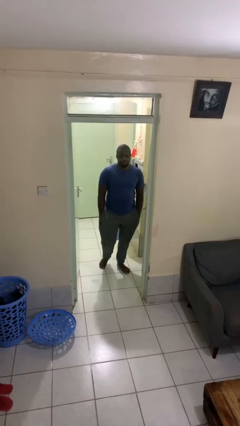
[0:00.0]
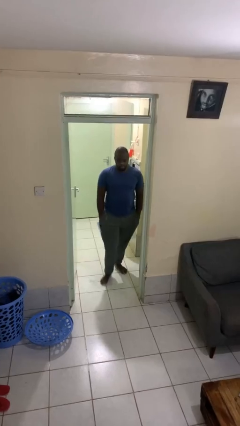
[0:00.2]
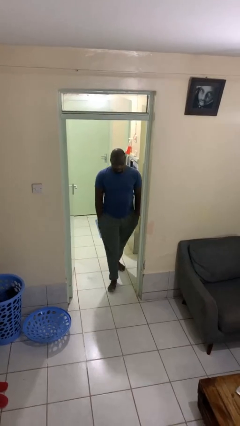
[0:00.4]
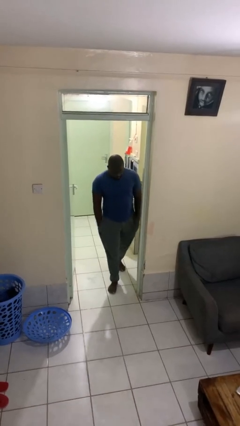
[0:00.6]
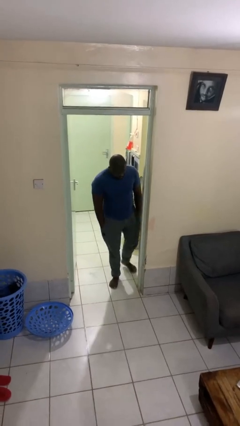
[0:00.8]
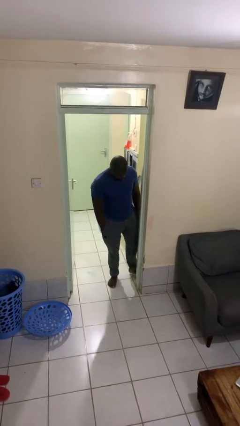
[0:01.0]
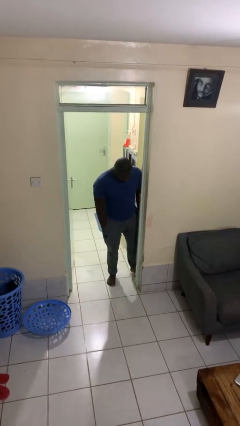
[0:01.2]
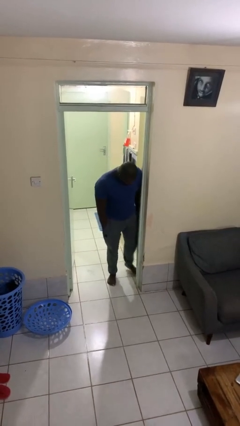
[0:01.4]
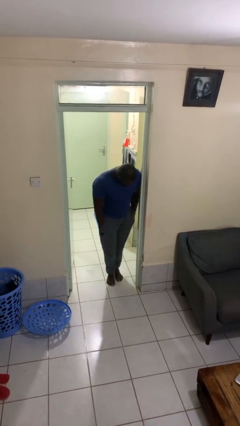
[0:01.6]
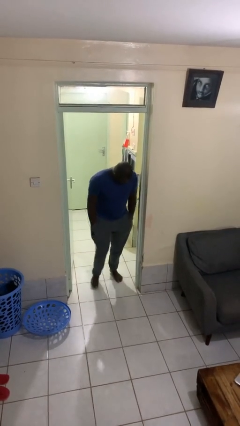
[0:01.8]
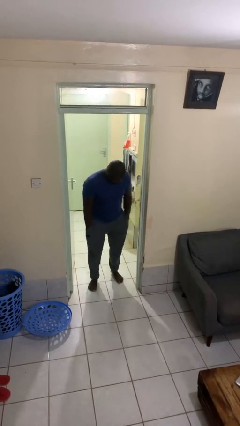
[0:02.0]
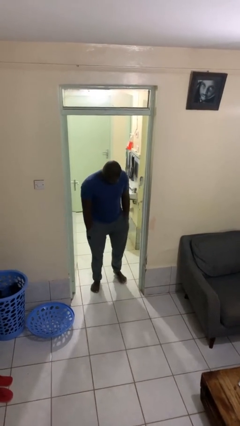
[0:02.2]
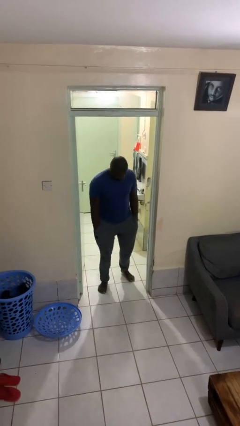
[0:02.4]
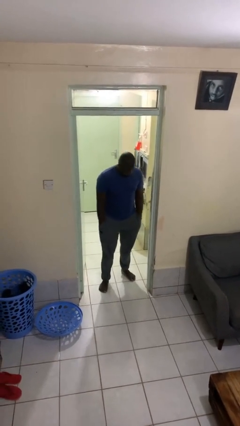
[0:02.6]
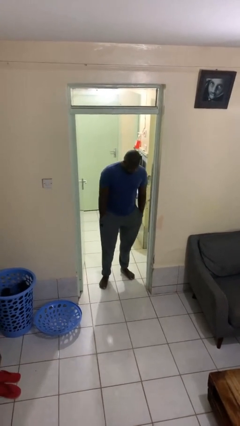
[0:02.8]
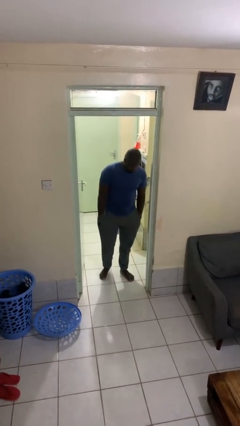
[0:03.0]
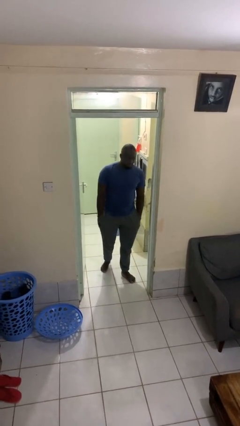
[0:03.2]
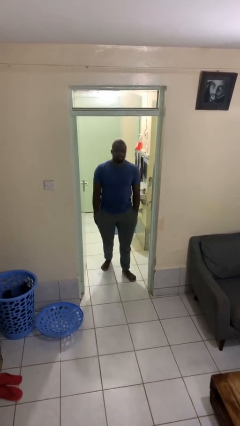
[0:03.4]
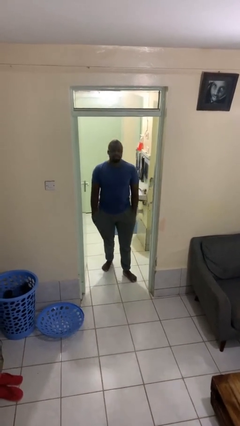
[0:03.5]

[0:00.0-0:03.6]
person bumps into wall

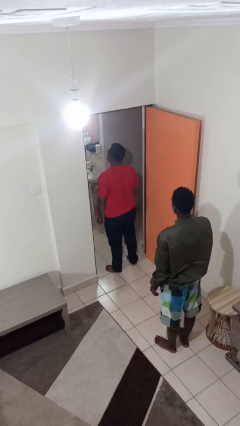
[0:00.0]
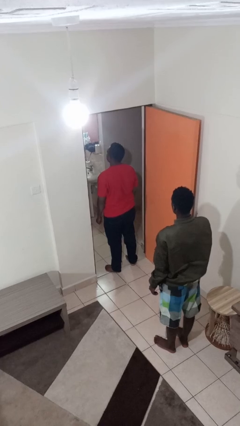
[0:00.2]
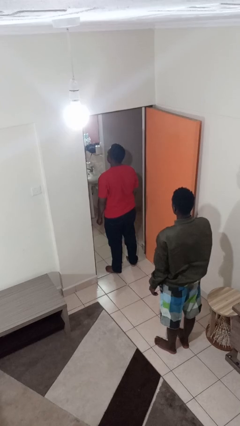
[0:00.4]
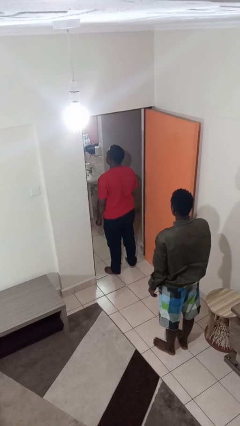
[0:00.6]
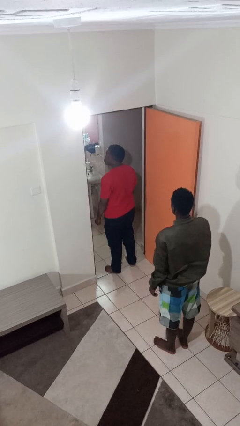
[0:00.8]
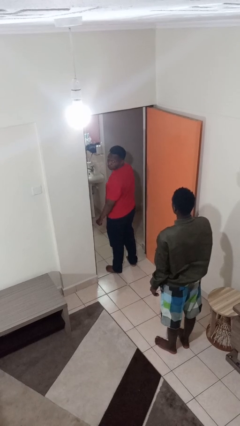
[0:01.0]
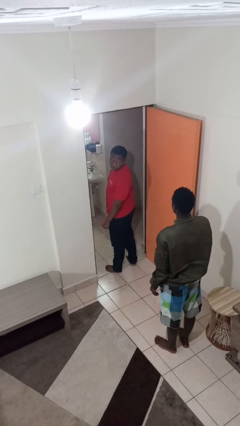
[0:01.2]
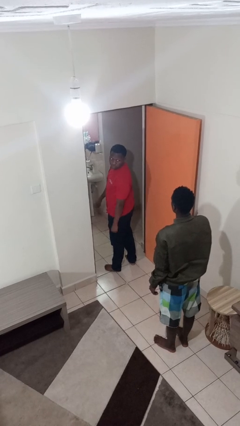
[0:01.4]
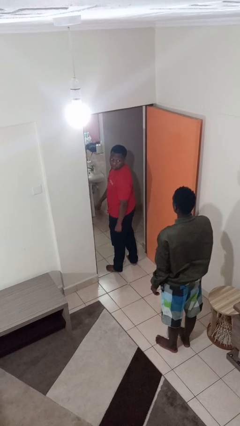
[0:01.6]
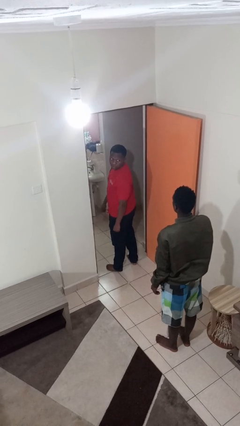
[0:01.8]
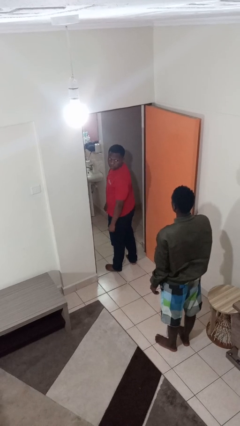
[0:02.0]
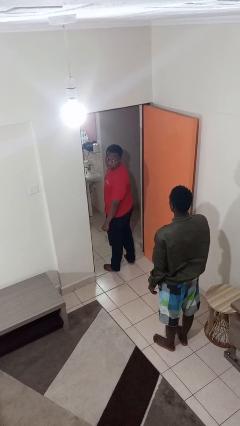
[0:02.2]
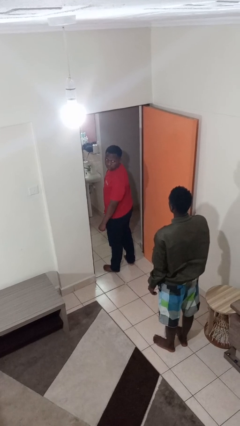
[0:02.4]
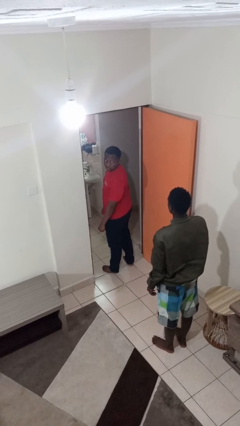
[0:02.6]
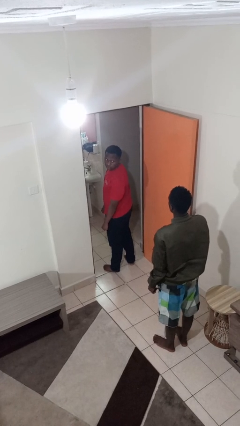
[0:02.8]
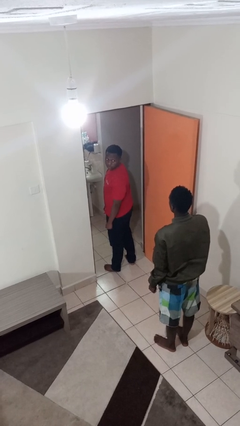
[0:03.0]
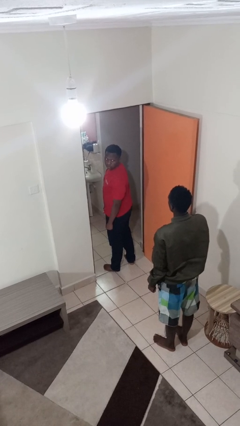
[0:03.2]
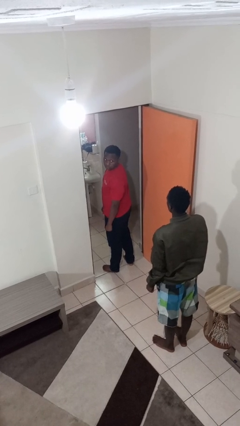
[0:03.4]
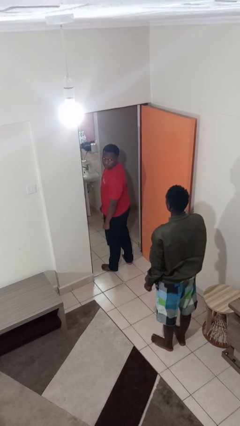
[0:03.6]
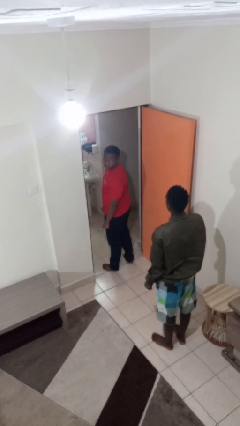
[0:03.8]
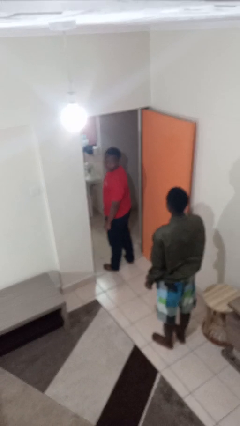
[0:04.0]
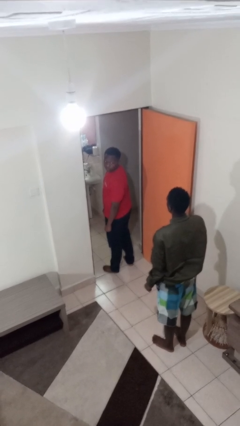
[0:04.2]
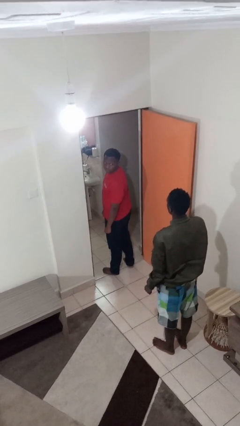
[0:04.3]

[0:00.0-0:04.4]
person looks over shoulder

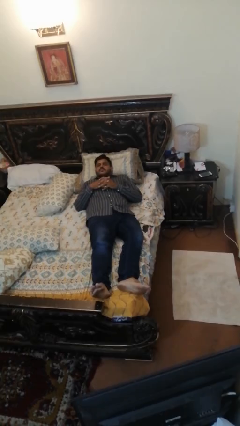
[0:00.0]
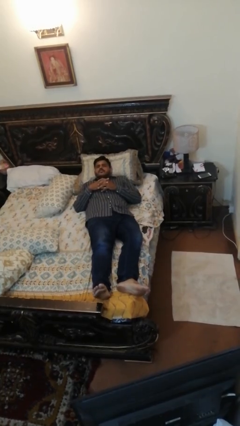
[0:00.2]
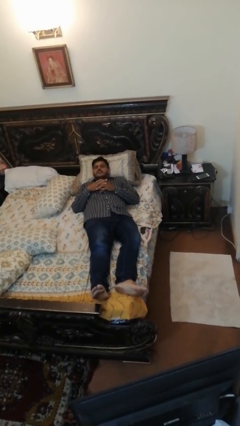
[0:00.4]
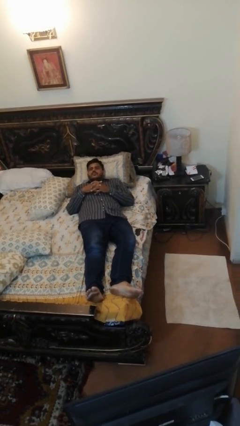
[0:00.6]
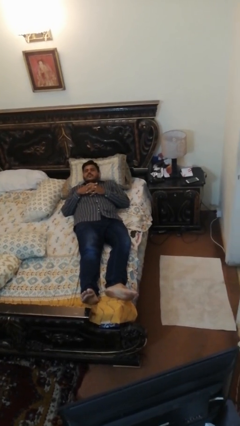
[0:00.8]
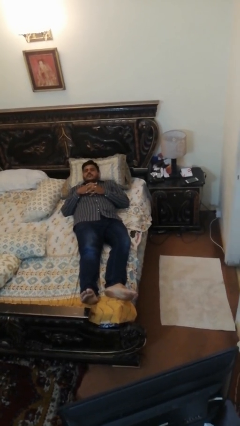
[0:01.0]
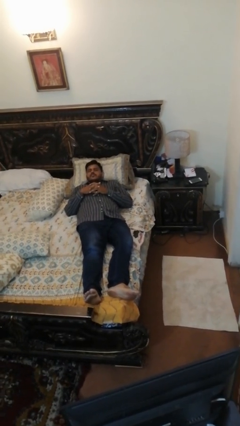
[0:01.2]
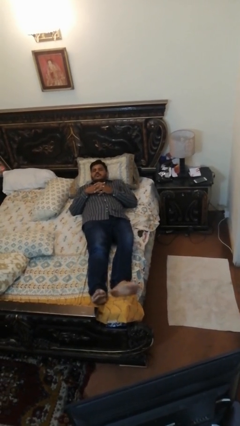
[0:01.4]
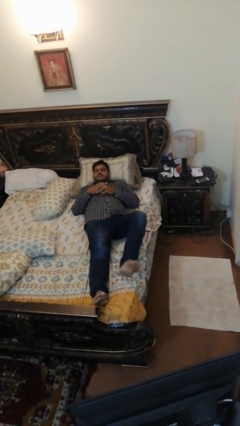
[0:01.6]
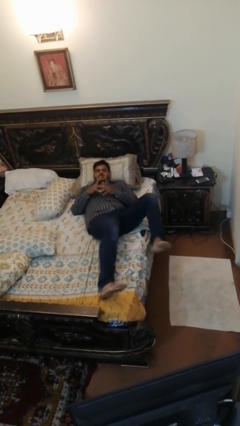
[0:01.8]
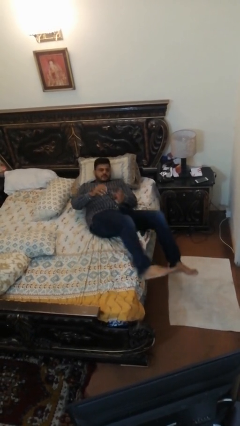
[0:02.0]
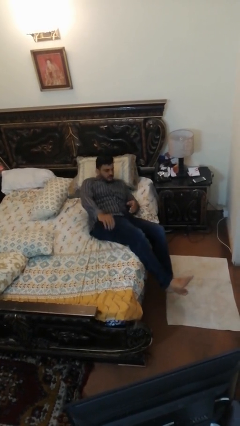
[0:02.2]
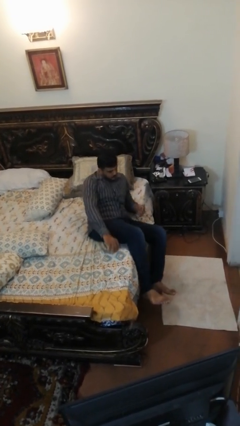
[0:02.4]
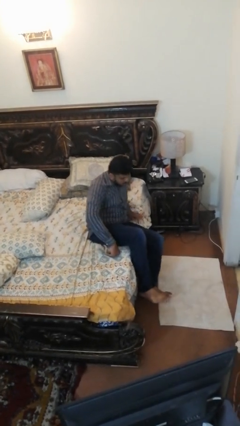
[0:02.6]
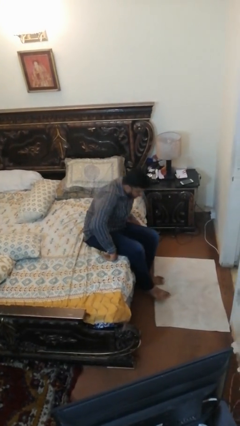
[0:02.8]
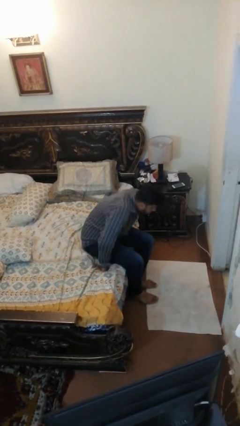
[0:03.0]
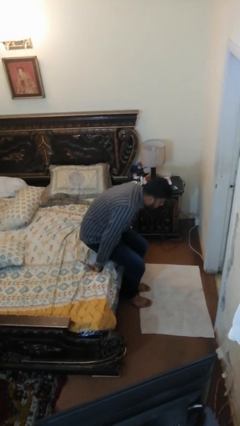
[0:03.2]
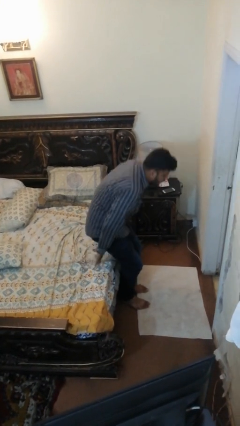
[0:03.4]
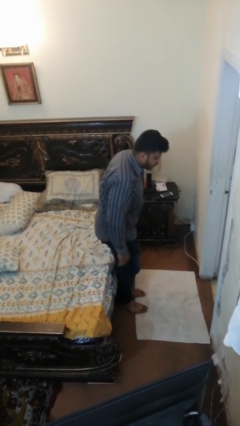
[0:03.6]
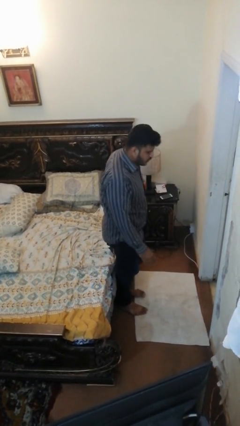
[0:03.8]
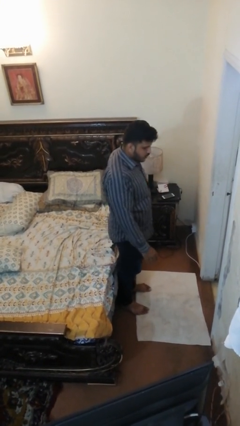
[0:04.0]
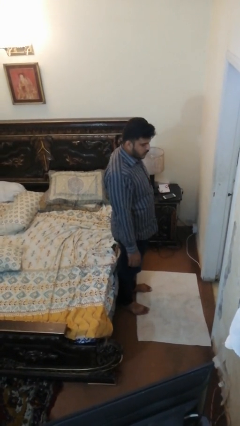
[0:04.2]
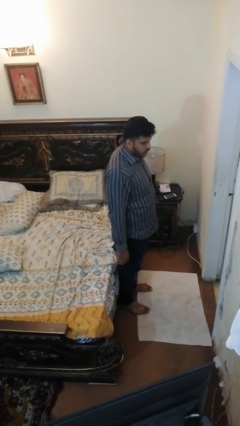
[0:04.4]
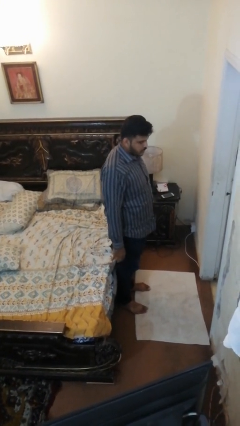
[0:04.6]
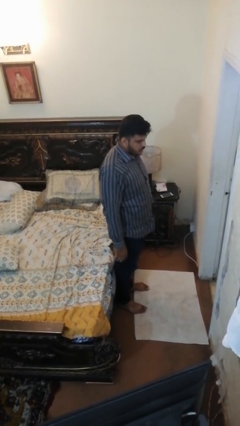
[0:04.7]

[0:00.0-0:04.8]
person stands up

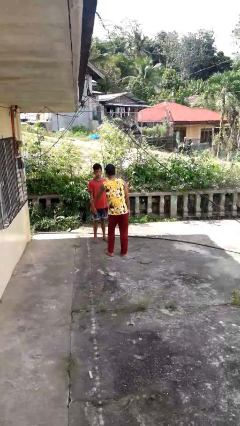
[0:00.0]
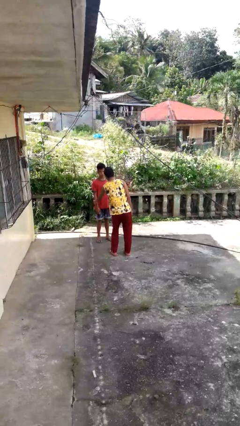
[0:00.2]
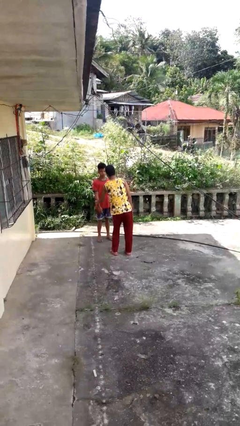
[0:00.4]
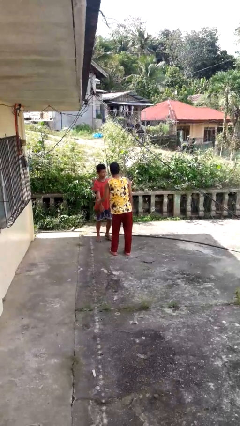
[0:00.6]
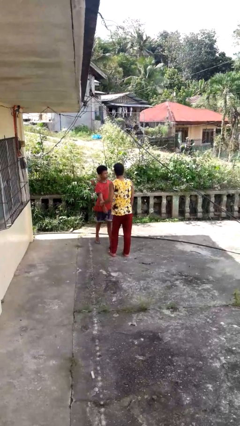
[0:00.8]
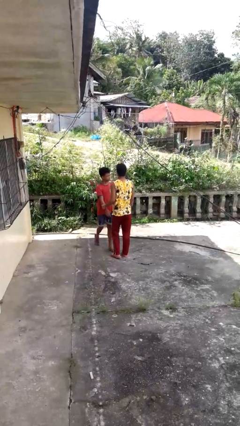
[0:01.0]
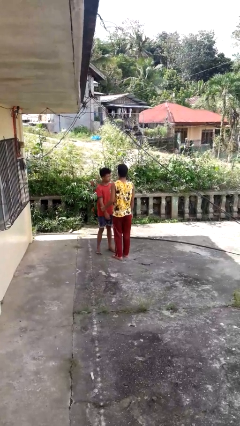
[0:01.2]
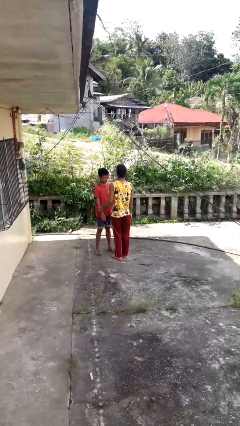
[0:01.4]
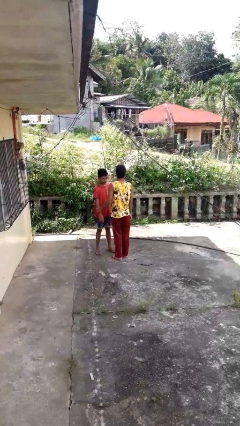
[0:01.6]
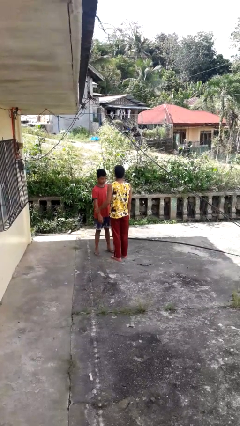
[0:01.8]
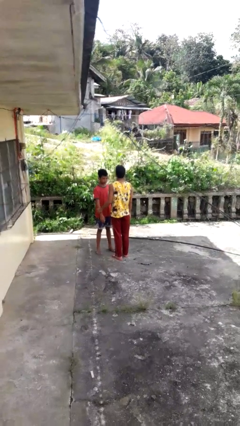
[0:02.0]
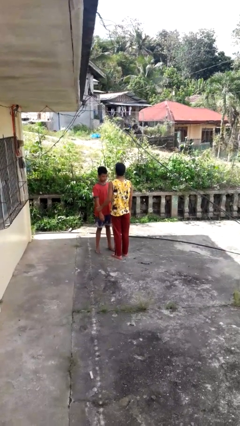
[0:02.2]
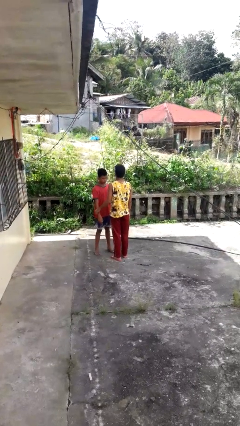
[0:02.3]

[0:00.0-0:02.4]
person grabs person by forearm

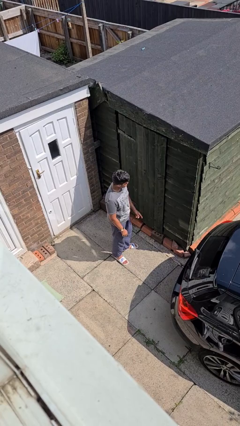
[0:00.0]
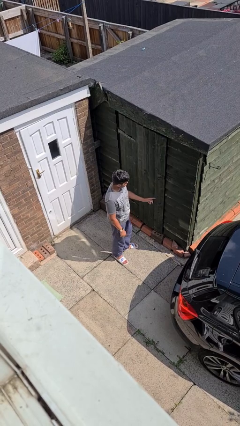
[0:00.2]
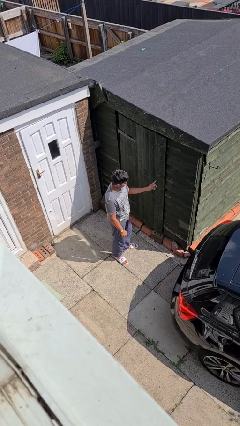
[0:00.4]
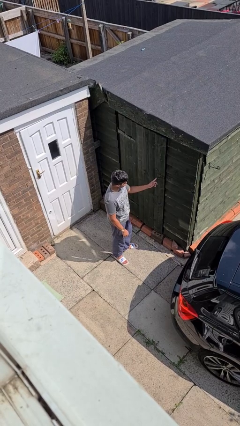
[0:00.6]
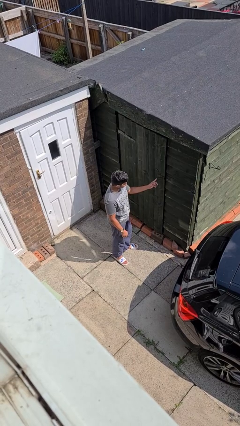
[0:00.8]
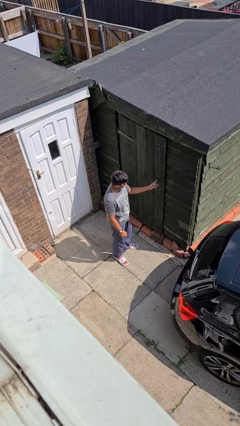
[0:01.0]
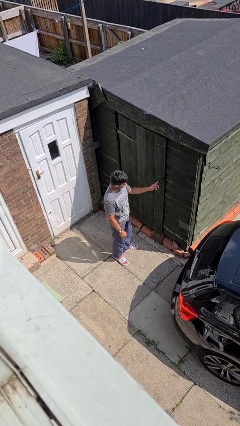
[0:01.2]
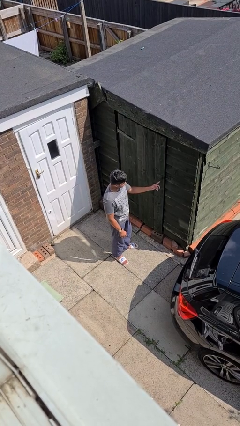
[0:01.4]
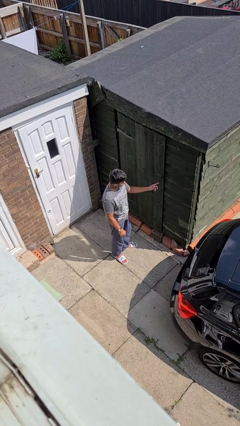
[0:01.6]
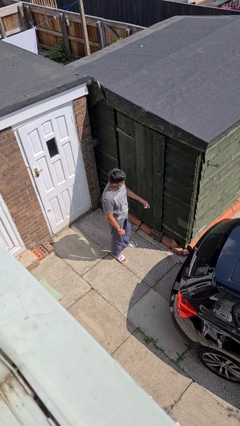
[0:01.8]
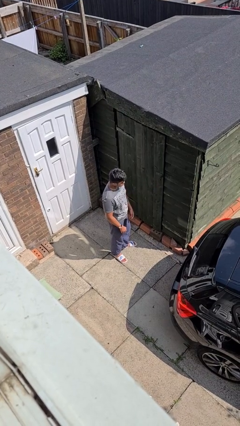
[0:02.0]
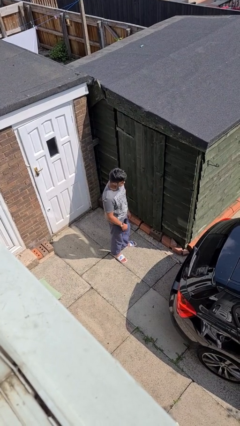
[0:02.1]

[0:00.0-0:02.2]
person taps object with finger

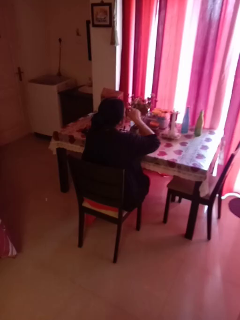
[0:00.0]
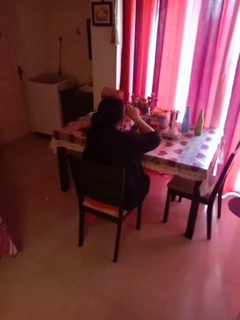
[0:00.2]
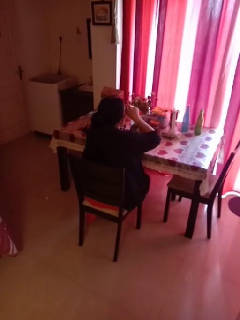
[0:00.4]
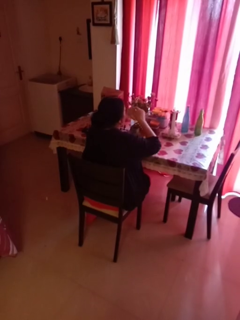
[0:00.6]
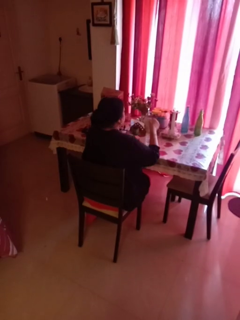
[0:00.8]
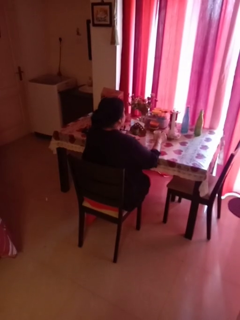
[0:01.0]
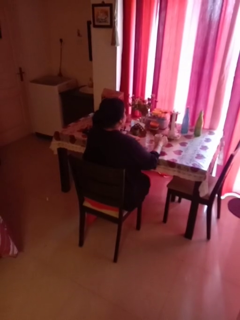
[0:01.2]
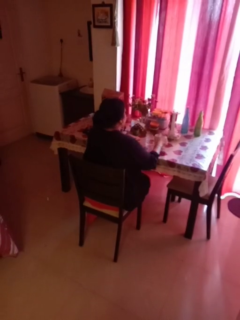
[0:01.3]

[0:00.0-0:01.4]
person drinks from mug
